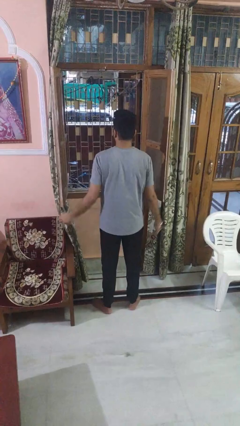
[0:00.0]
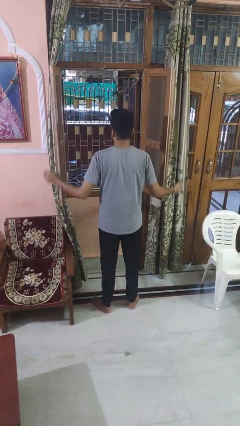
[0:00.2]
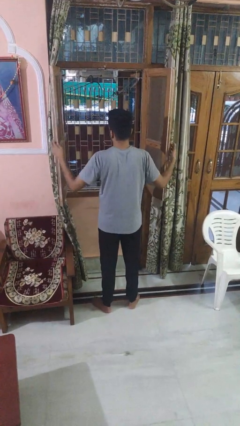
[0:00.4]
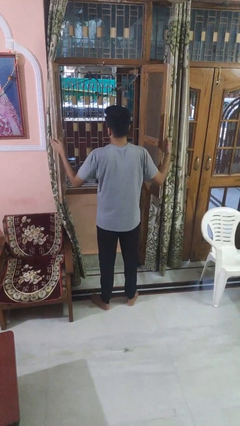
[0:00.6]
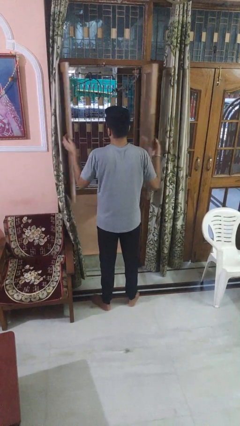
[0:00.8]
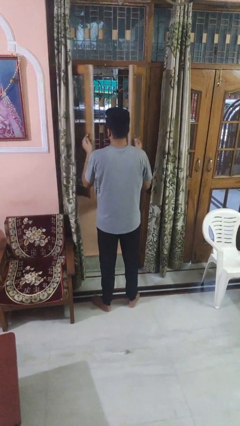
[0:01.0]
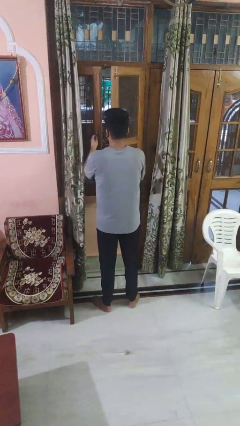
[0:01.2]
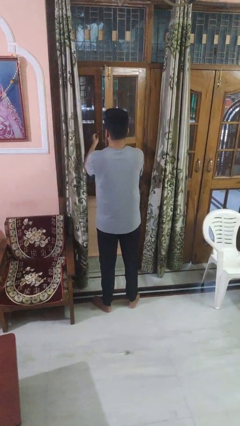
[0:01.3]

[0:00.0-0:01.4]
person closes home window

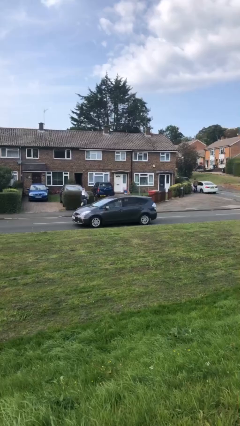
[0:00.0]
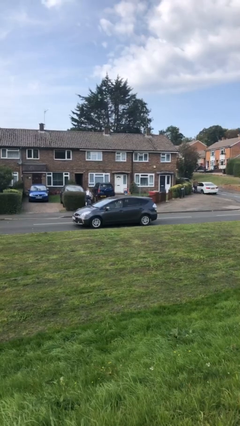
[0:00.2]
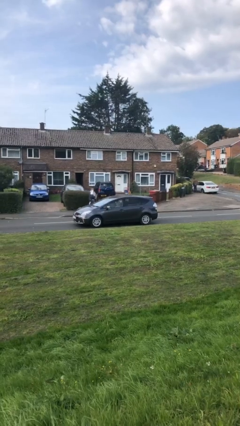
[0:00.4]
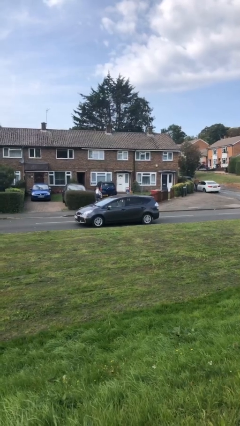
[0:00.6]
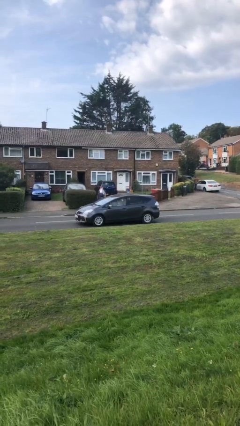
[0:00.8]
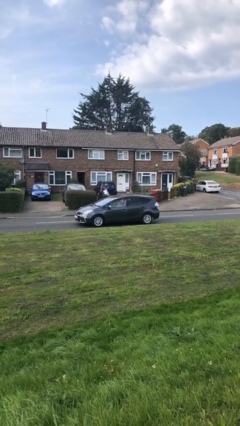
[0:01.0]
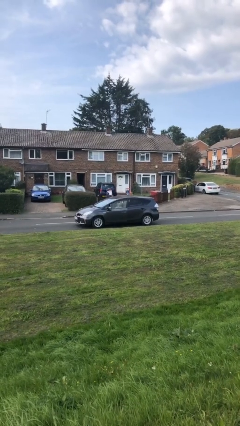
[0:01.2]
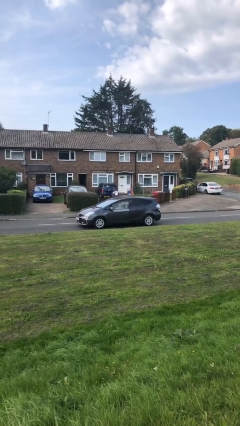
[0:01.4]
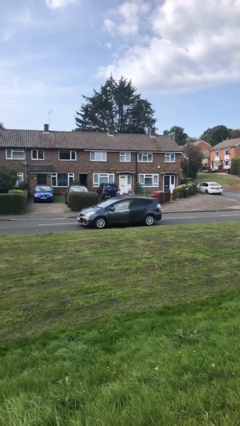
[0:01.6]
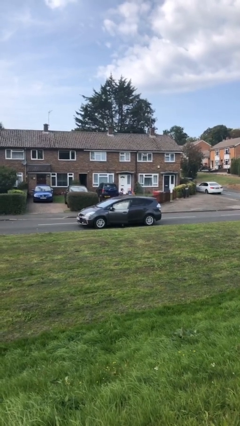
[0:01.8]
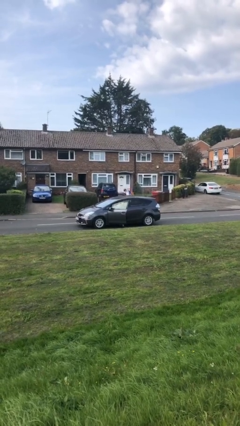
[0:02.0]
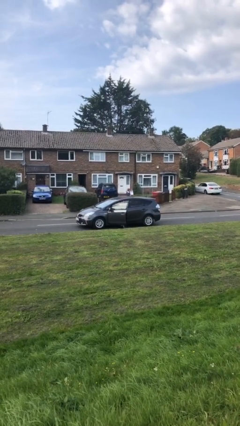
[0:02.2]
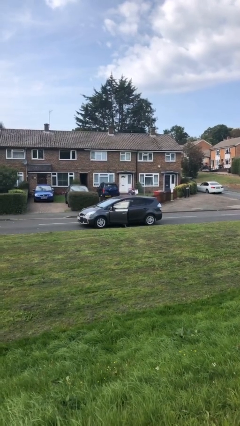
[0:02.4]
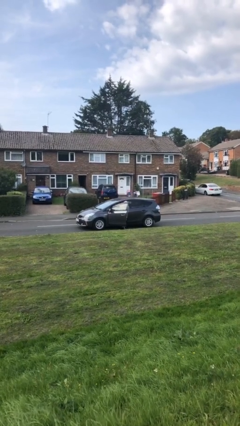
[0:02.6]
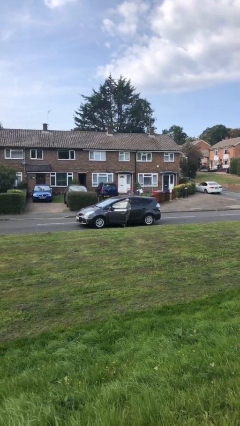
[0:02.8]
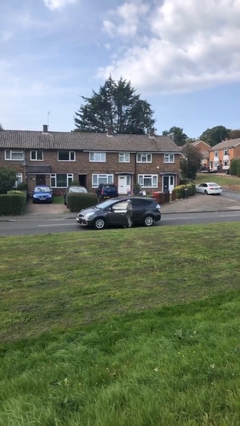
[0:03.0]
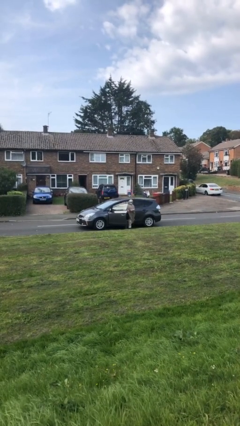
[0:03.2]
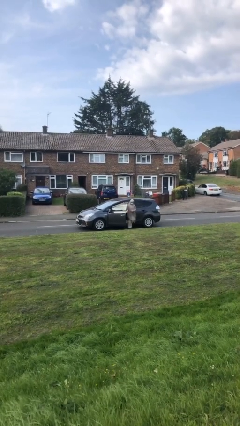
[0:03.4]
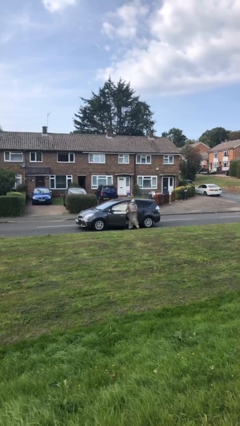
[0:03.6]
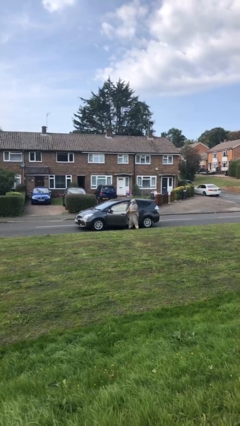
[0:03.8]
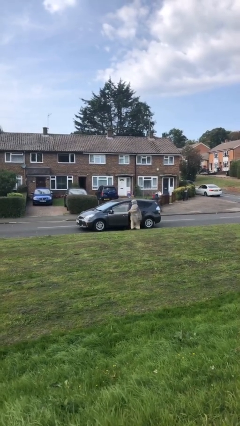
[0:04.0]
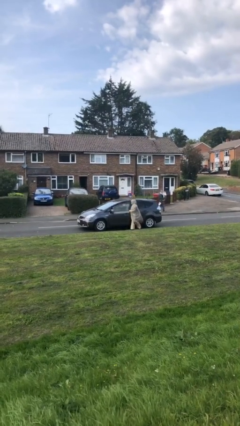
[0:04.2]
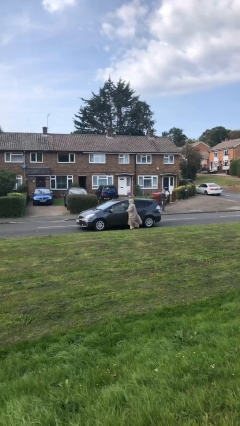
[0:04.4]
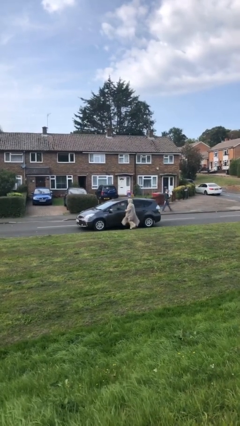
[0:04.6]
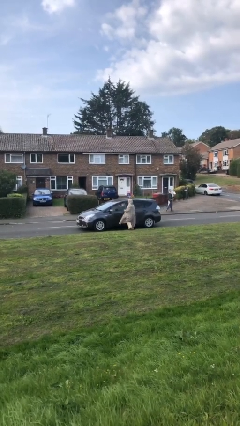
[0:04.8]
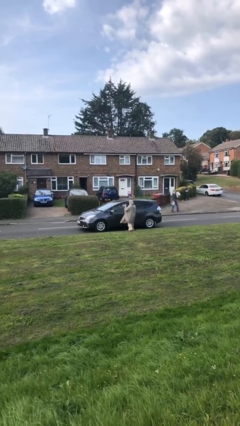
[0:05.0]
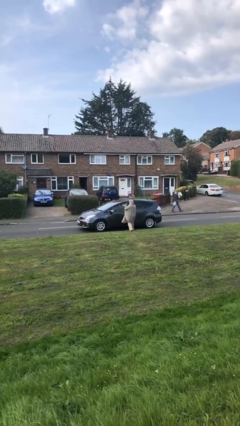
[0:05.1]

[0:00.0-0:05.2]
car drops off person

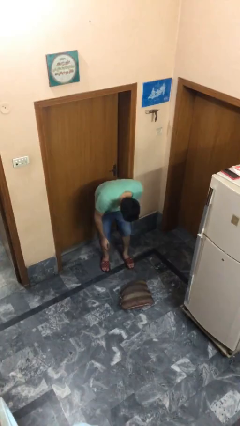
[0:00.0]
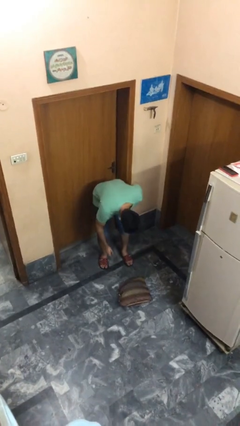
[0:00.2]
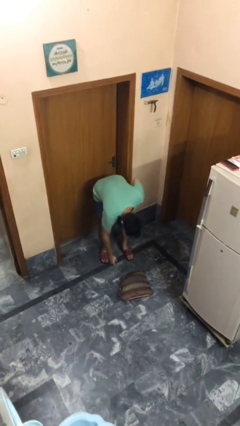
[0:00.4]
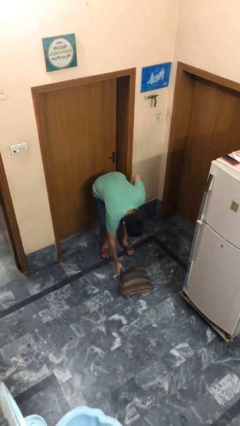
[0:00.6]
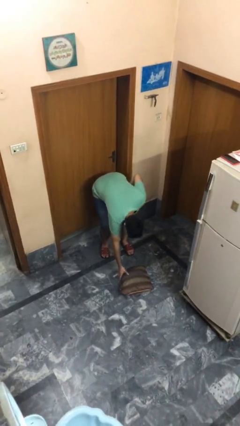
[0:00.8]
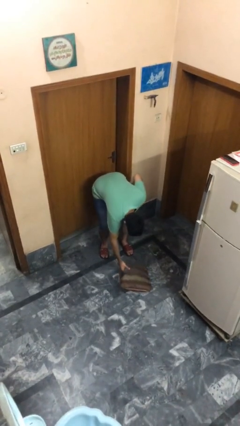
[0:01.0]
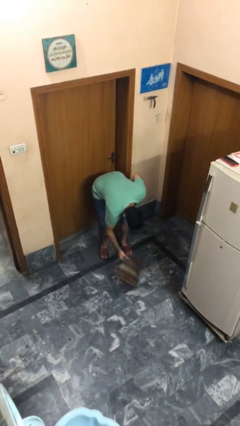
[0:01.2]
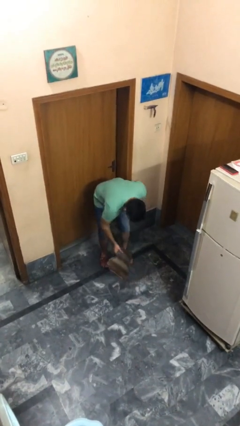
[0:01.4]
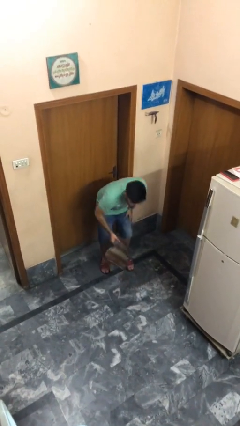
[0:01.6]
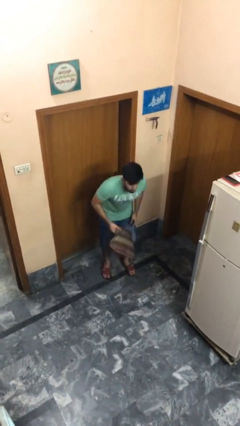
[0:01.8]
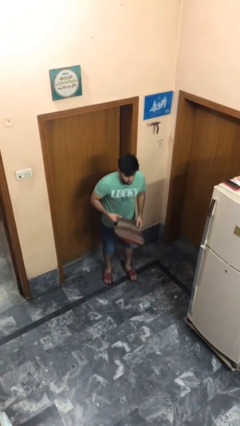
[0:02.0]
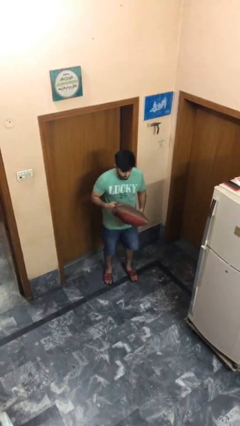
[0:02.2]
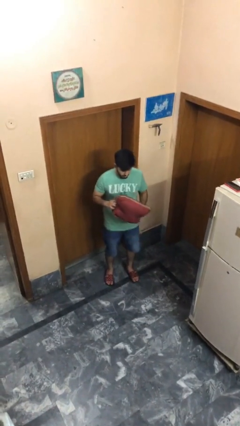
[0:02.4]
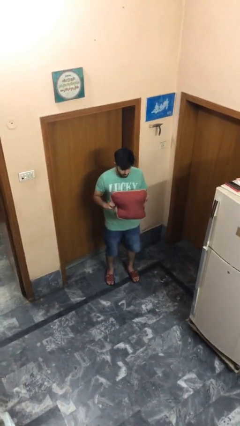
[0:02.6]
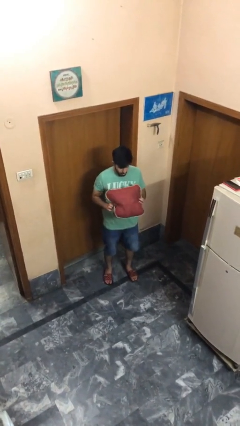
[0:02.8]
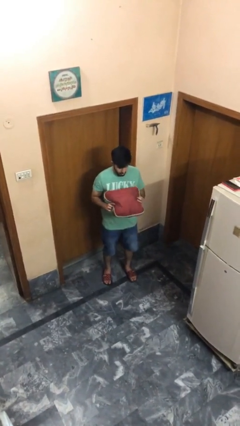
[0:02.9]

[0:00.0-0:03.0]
person picks up object from floor

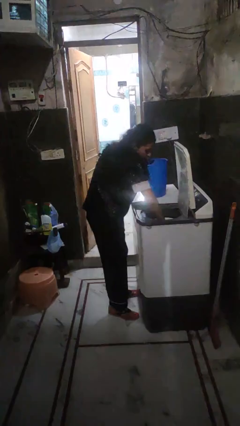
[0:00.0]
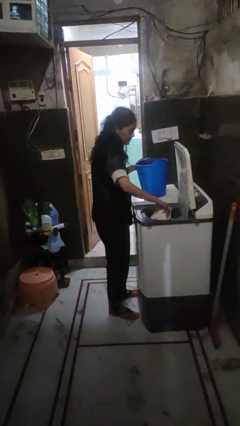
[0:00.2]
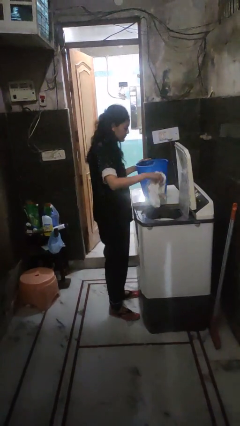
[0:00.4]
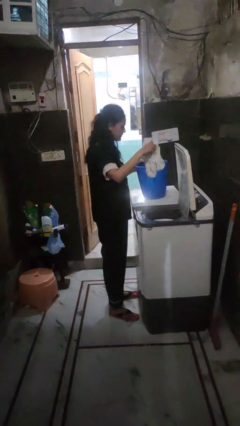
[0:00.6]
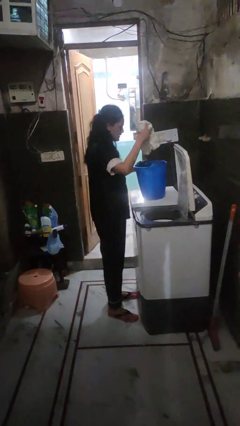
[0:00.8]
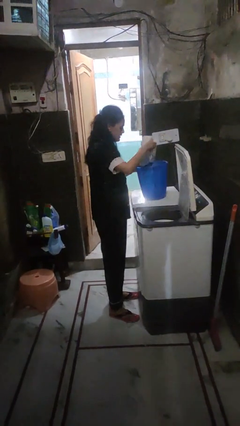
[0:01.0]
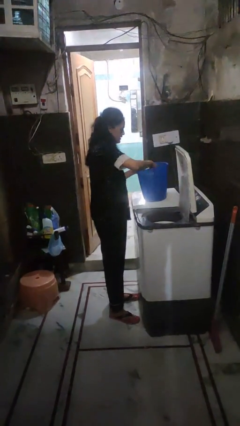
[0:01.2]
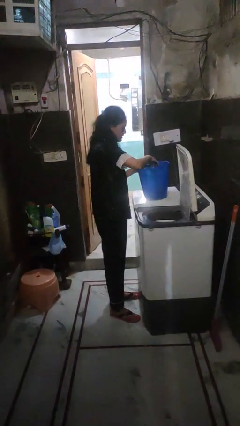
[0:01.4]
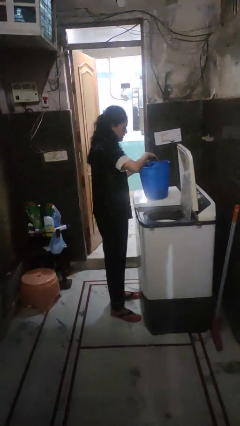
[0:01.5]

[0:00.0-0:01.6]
person unloads dryer

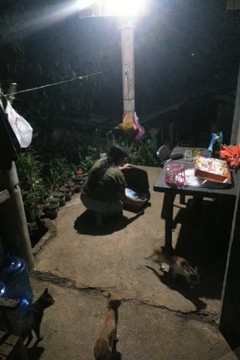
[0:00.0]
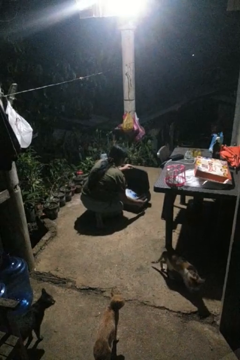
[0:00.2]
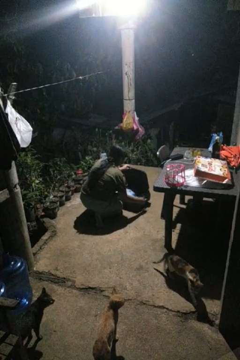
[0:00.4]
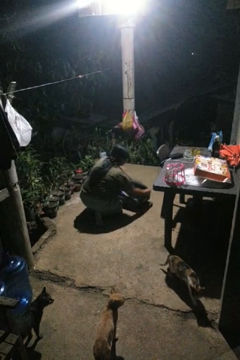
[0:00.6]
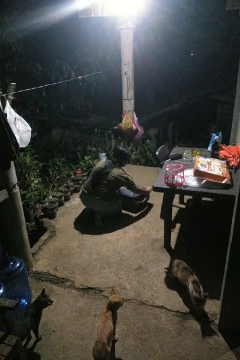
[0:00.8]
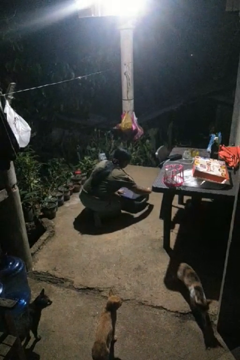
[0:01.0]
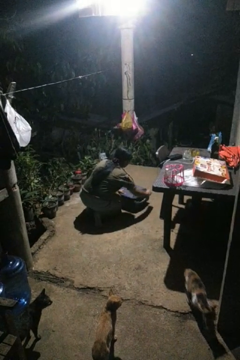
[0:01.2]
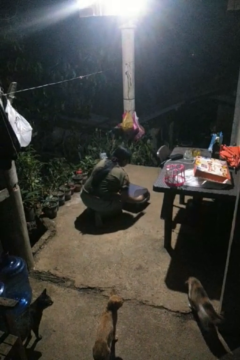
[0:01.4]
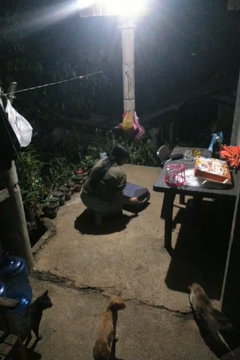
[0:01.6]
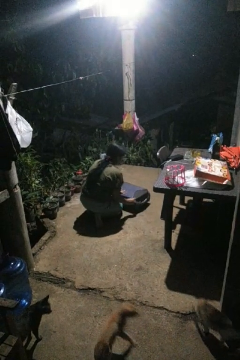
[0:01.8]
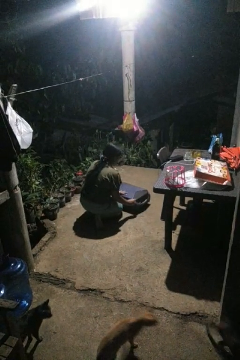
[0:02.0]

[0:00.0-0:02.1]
person closes suitcase

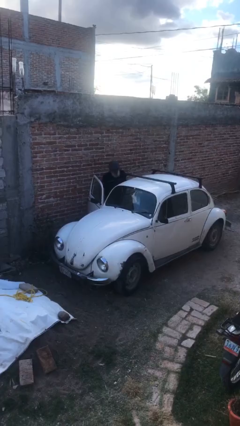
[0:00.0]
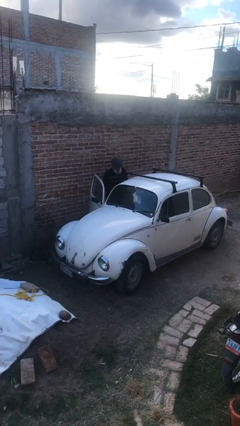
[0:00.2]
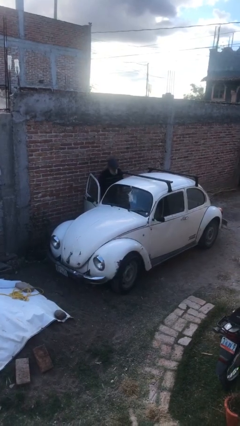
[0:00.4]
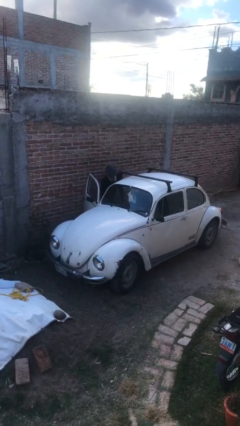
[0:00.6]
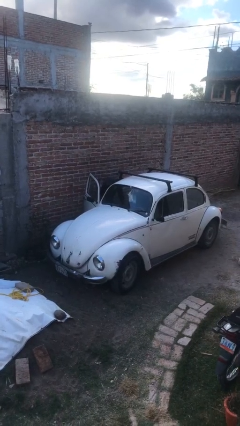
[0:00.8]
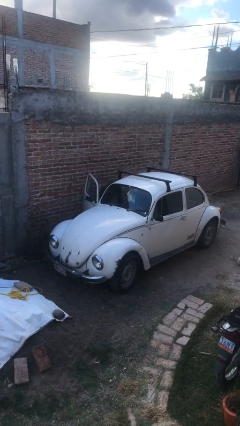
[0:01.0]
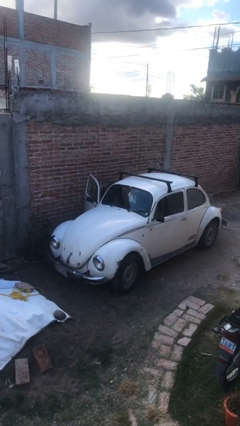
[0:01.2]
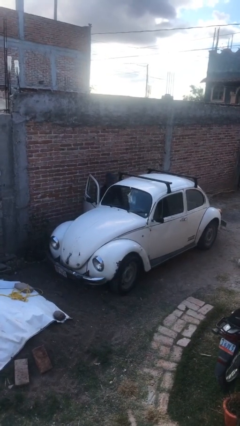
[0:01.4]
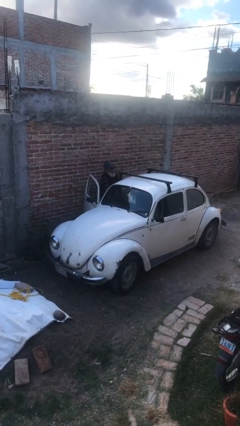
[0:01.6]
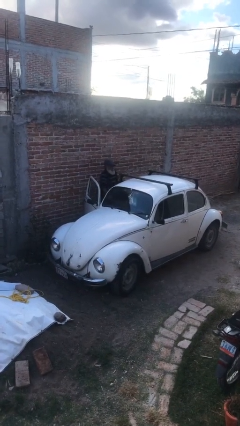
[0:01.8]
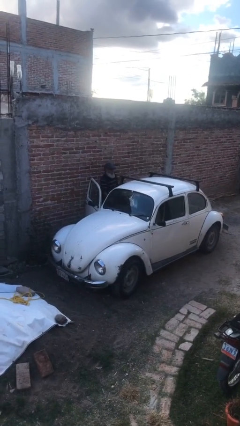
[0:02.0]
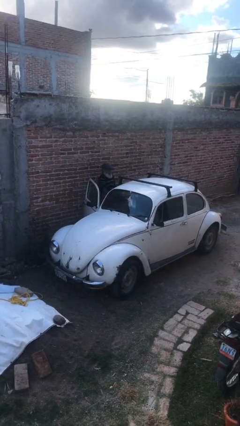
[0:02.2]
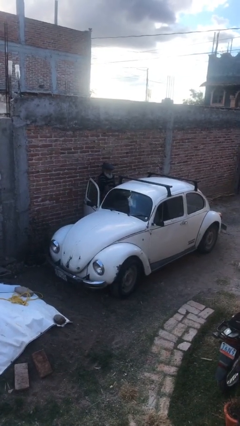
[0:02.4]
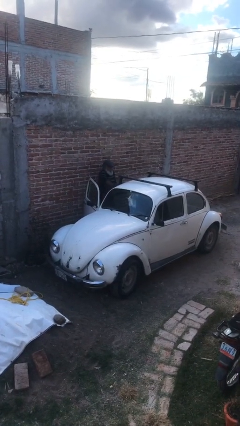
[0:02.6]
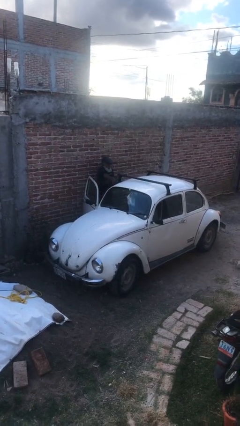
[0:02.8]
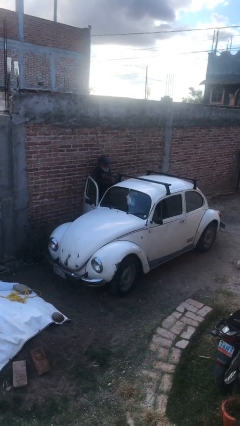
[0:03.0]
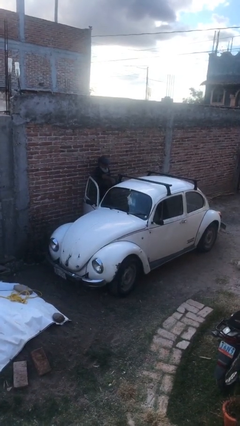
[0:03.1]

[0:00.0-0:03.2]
person unloads car

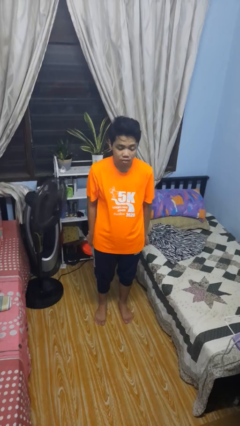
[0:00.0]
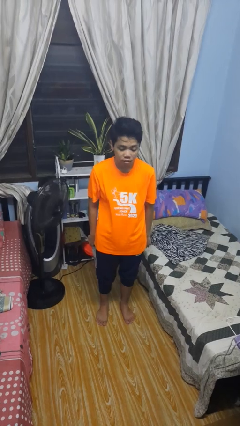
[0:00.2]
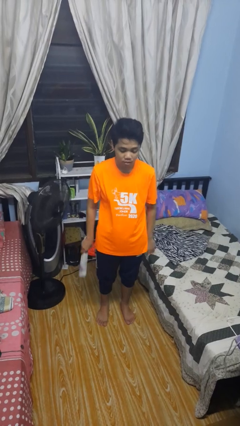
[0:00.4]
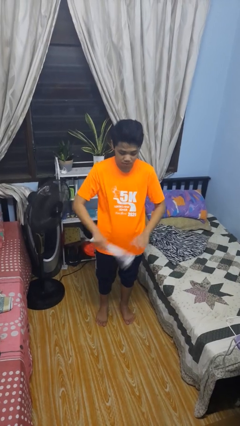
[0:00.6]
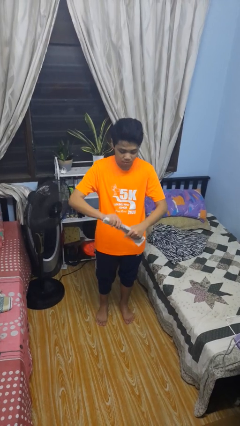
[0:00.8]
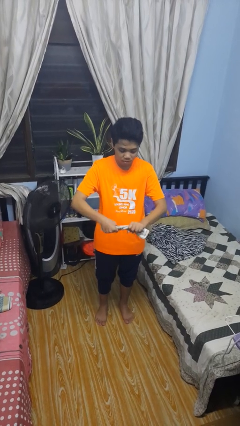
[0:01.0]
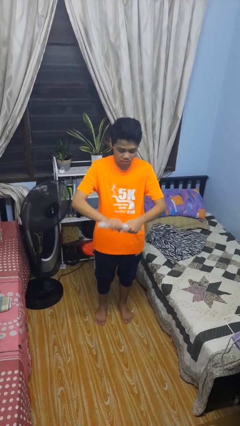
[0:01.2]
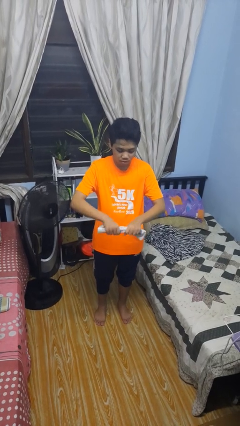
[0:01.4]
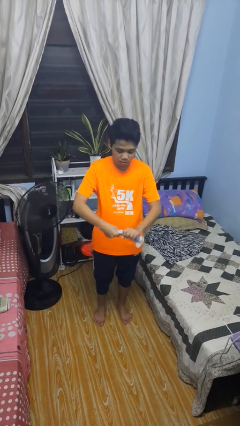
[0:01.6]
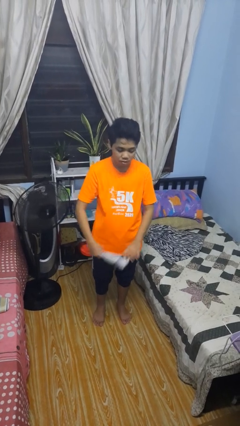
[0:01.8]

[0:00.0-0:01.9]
person squeezes object
